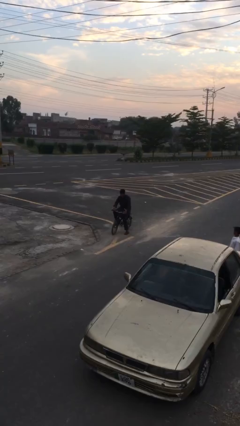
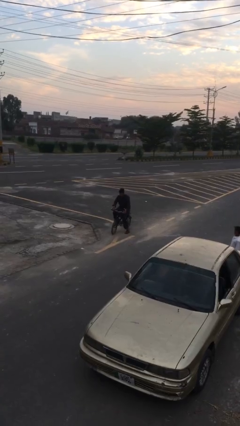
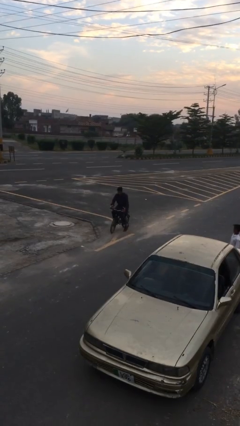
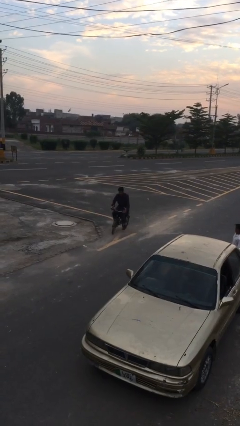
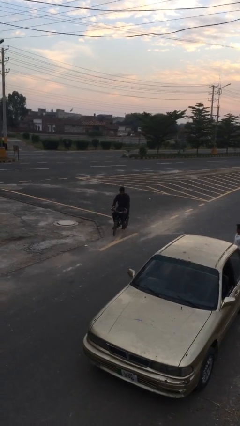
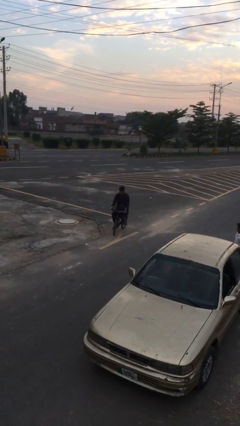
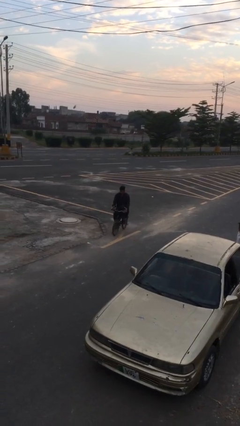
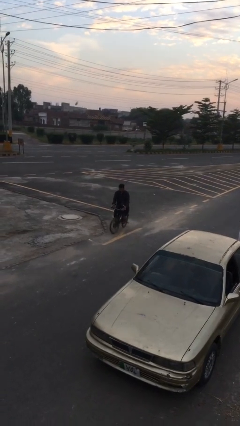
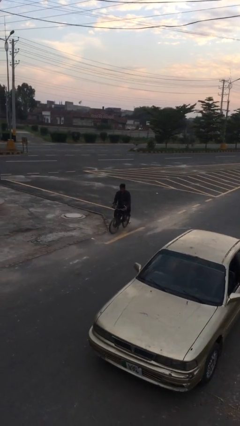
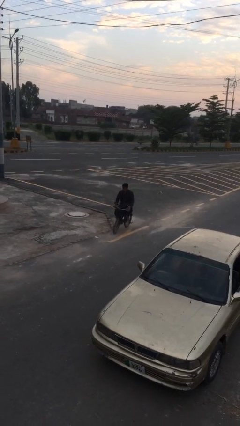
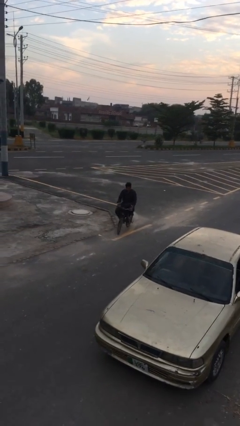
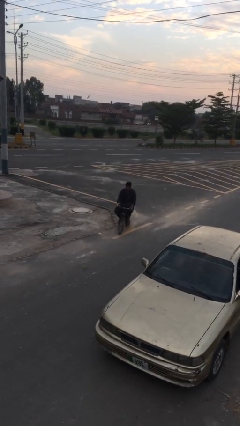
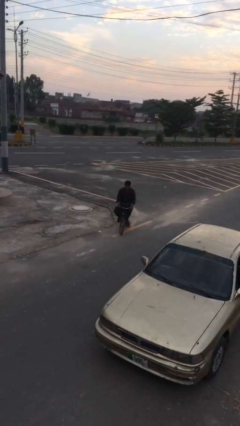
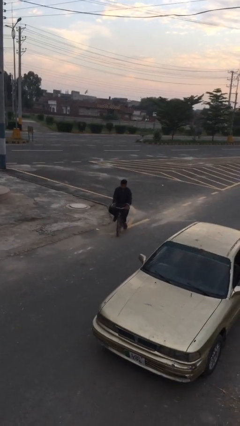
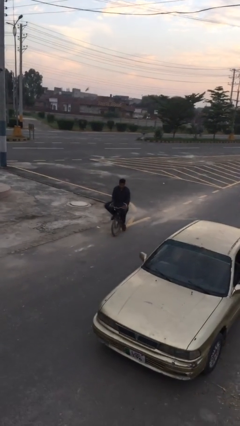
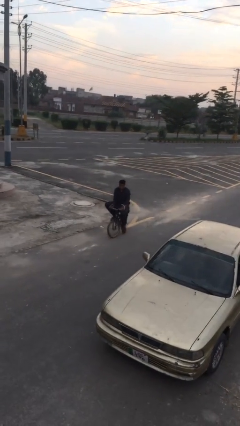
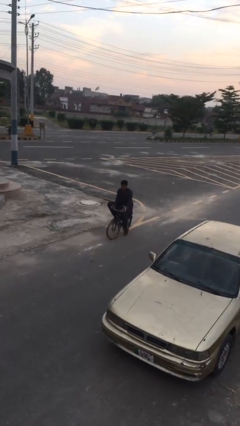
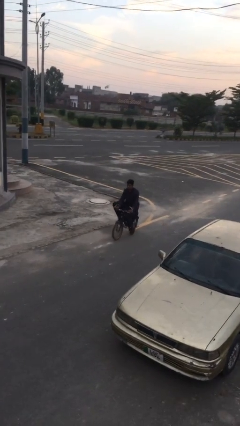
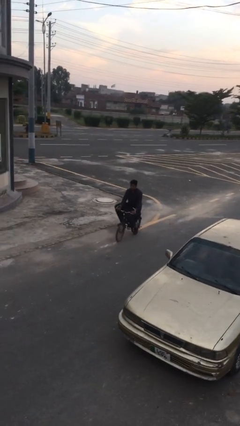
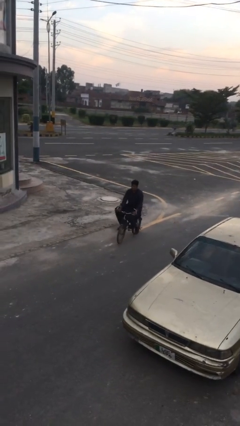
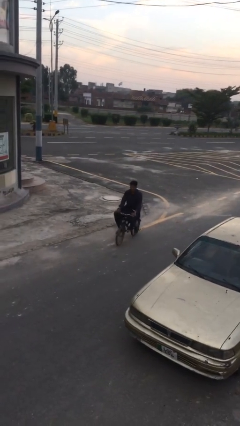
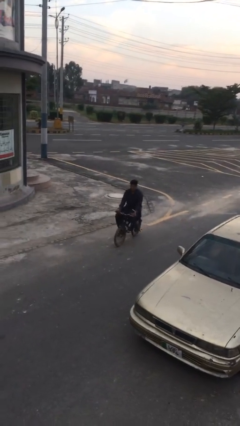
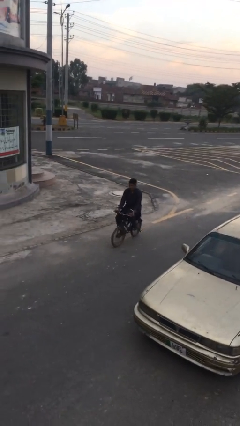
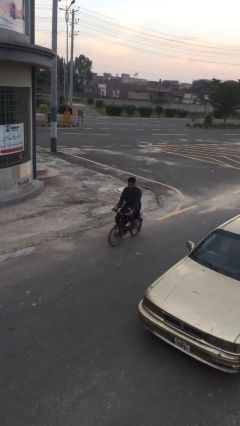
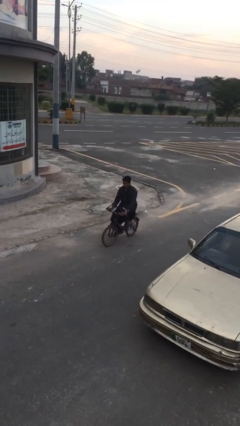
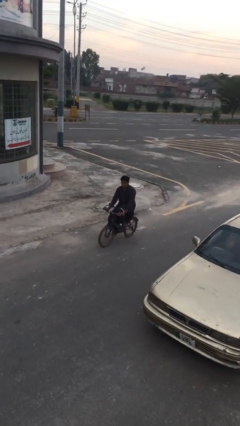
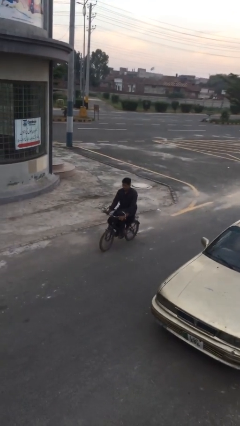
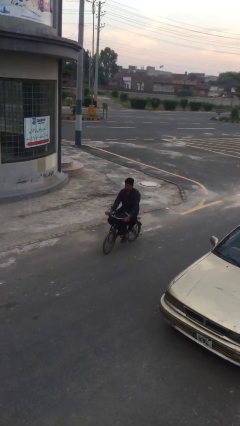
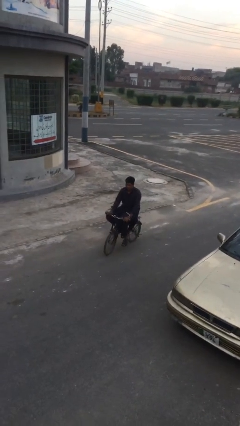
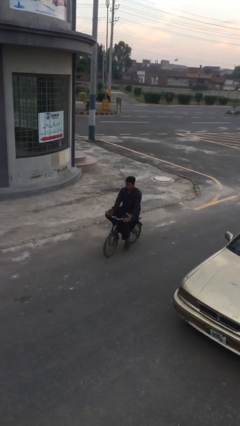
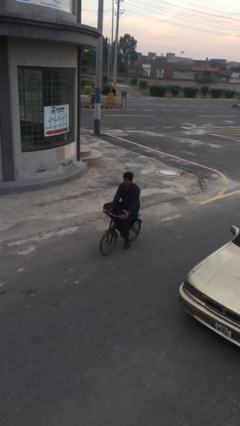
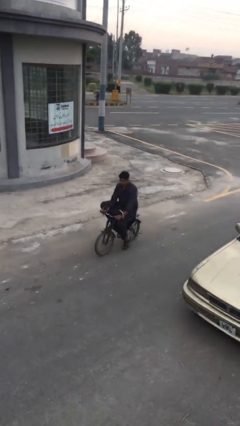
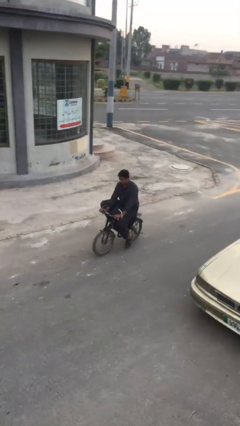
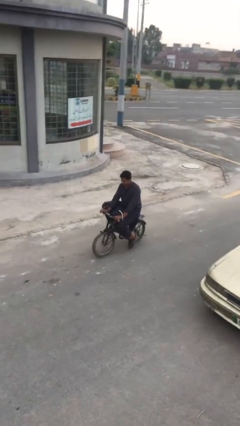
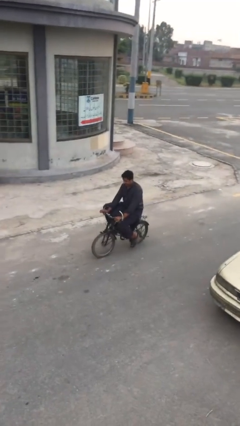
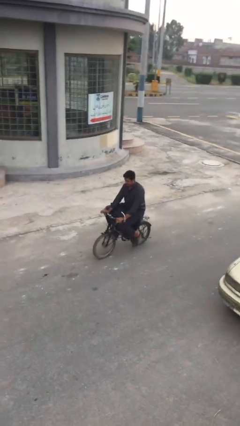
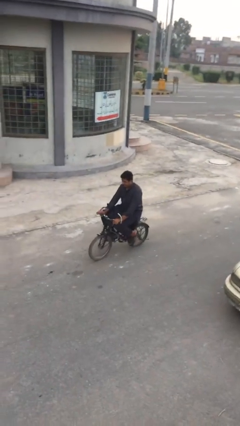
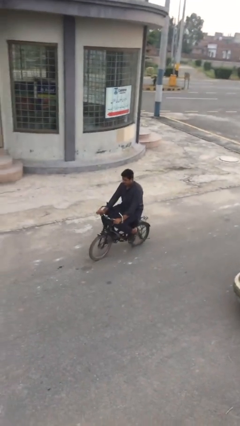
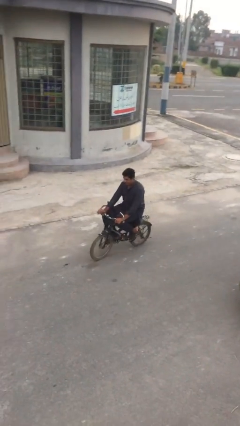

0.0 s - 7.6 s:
person rides bicycle

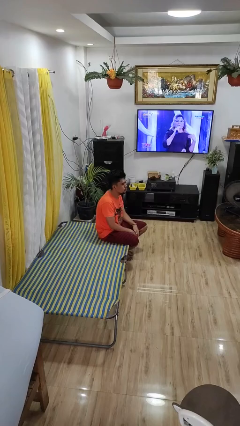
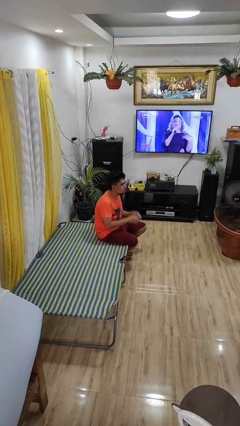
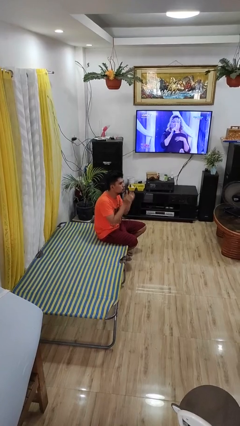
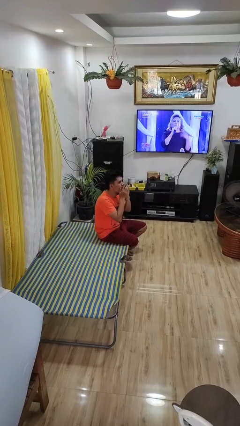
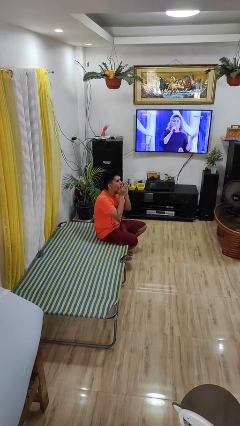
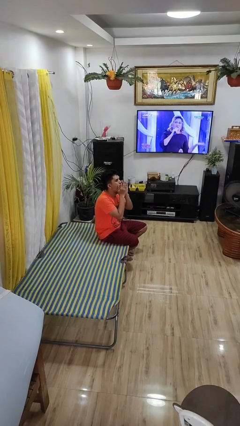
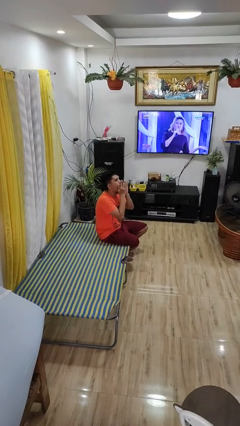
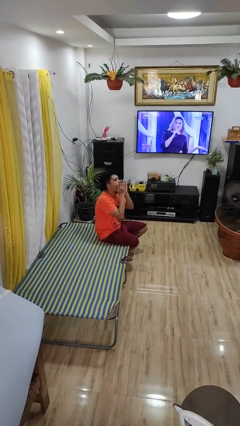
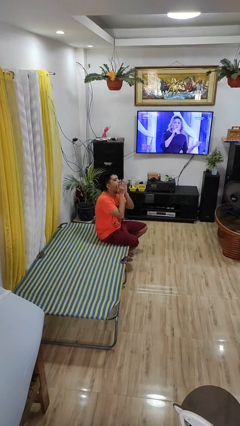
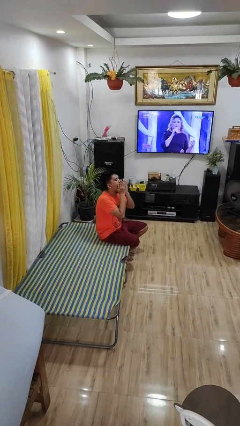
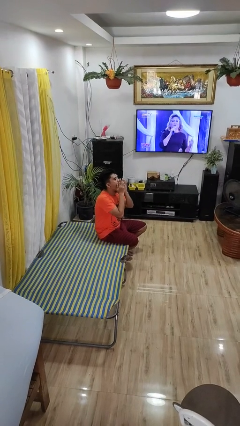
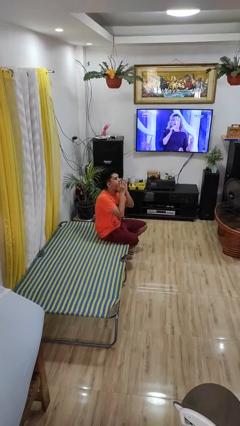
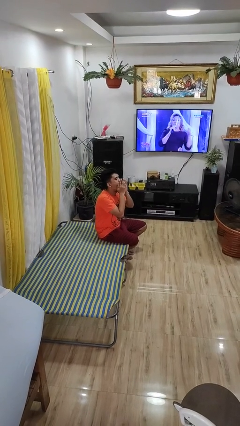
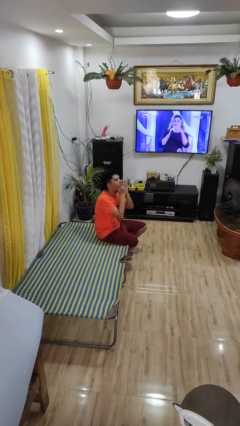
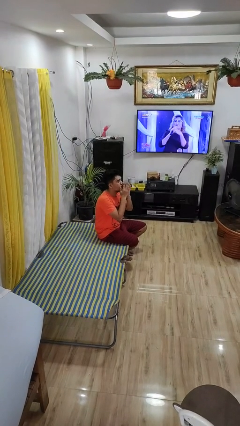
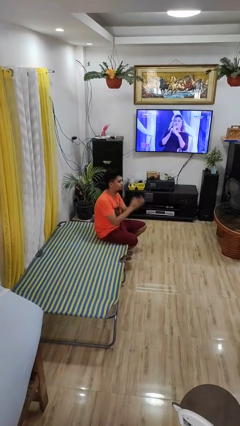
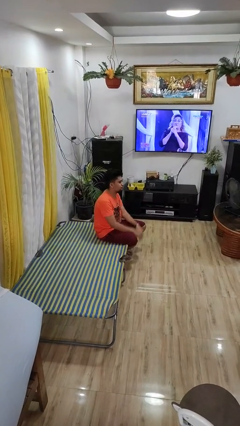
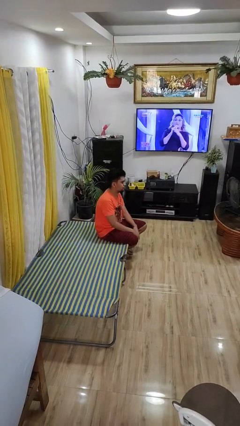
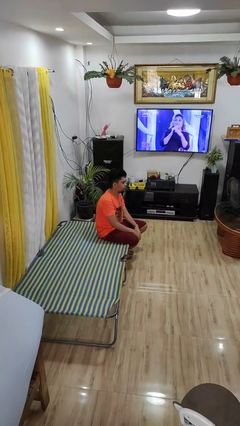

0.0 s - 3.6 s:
person yawns

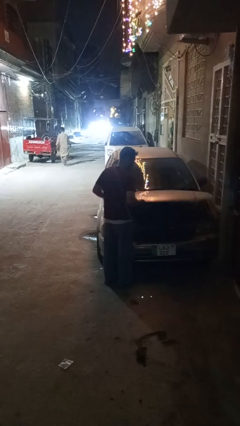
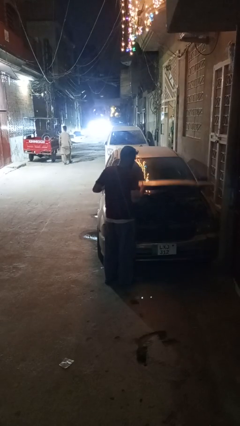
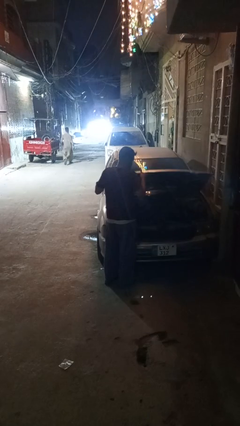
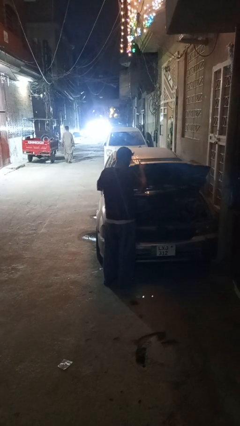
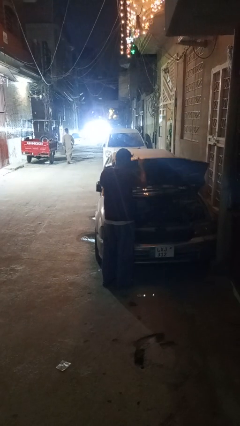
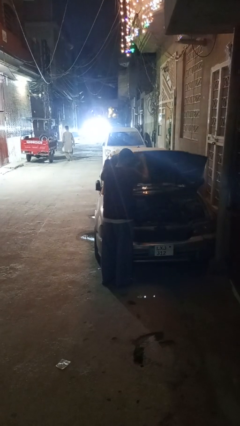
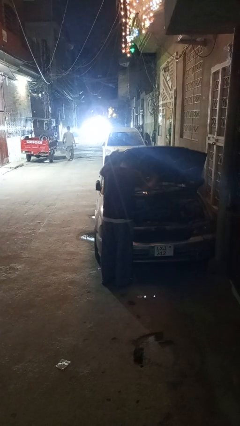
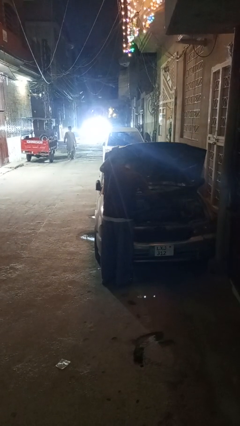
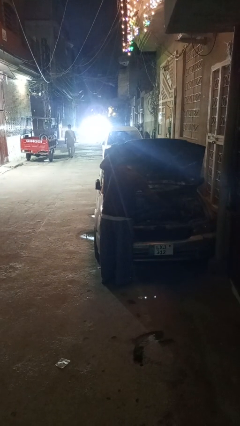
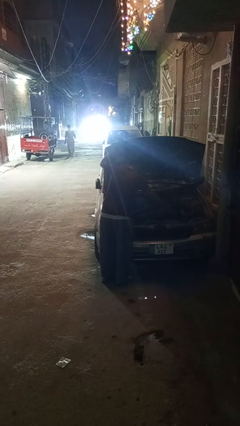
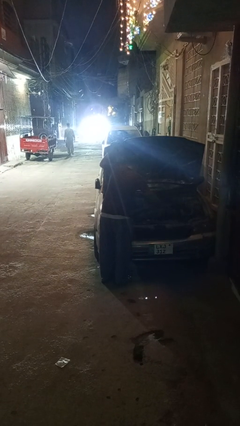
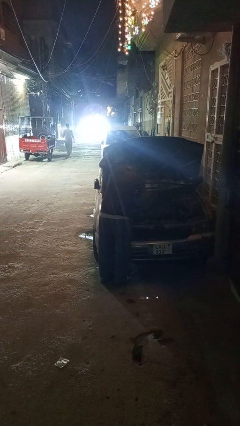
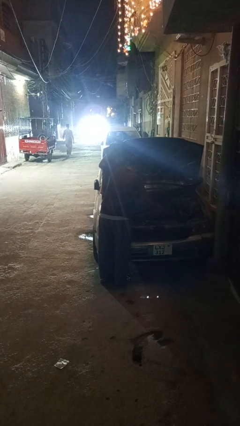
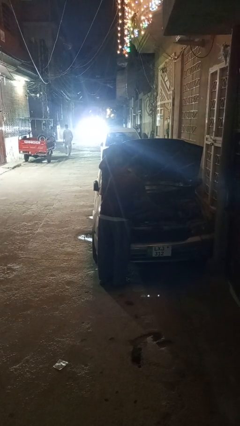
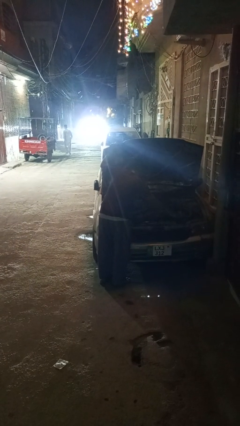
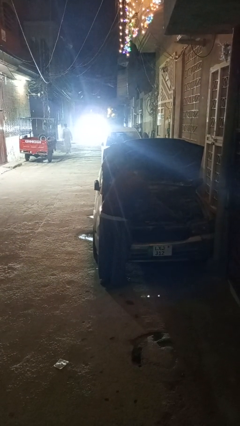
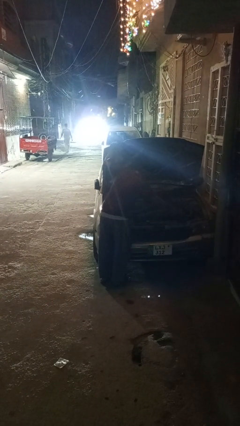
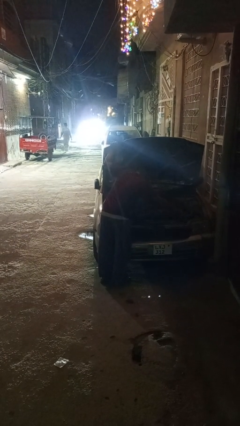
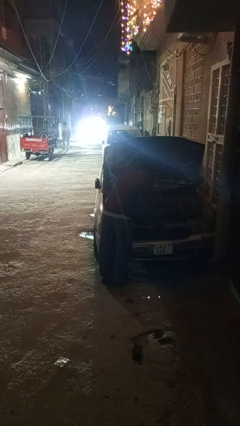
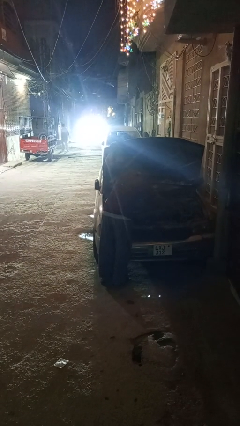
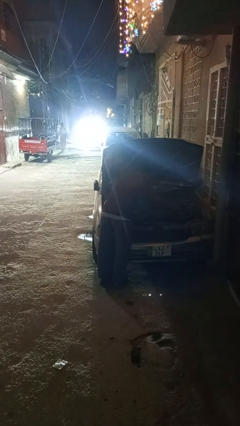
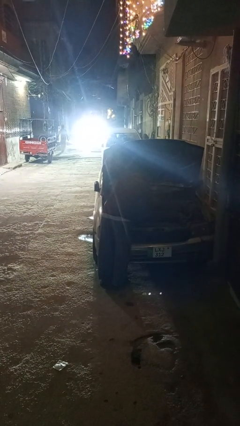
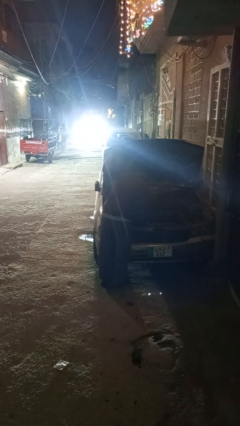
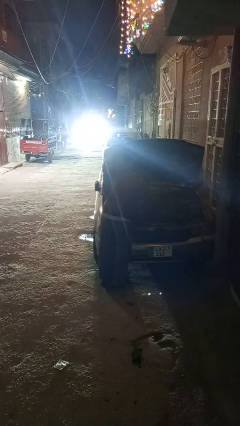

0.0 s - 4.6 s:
person opens car hood

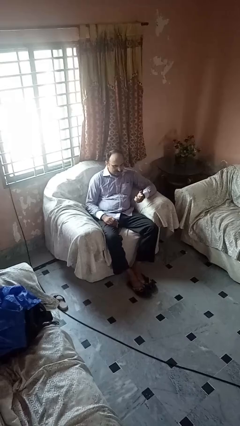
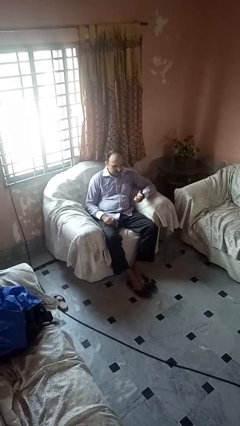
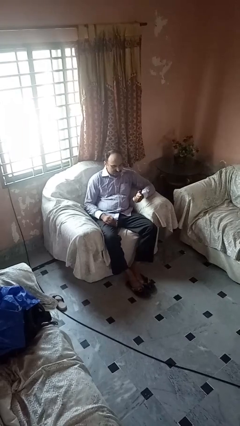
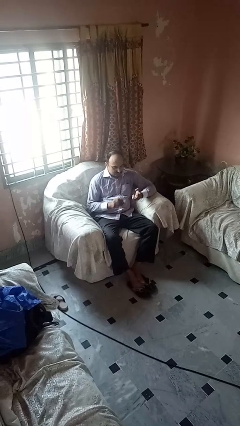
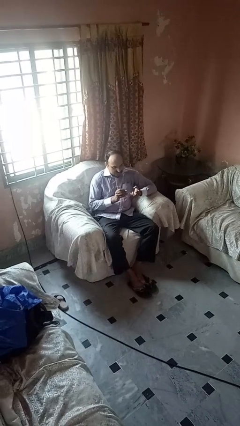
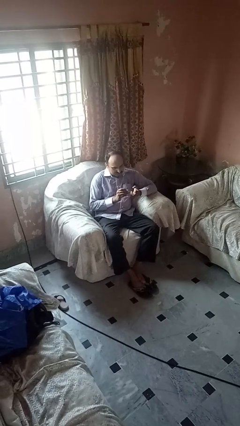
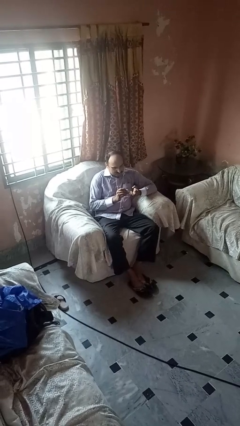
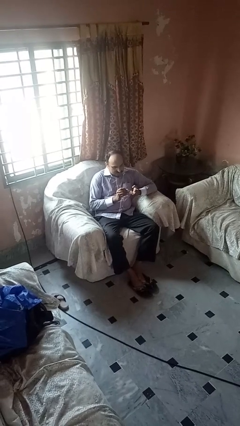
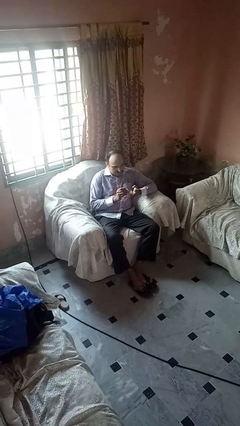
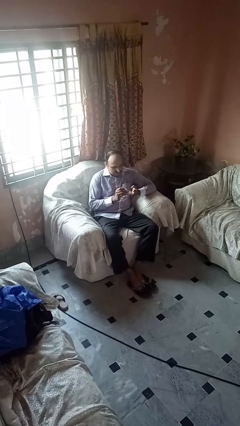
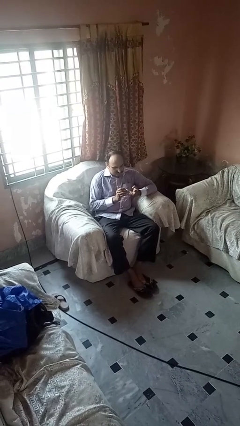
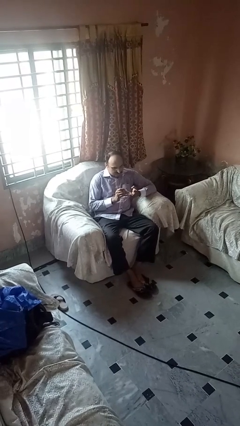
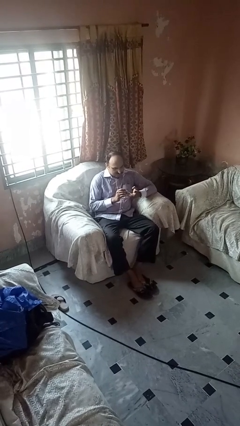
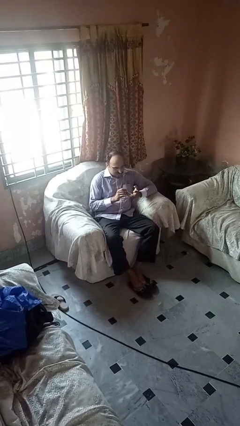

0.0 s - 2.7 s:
person clips fingernails
